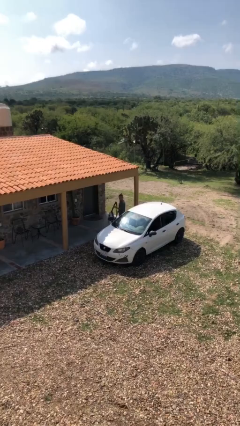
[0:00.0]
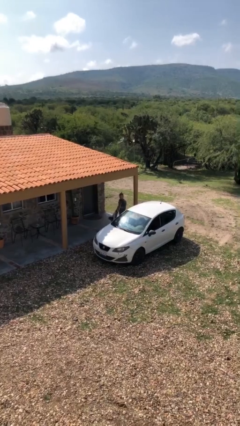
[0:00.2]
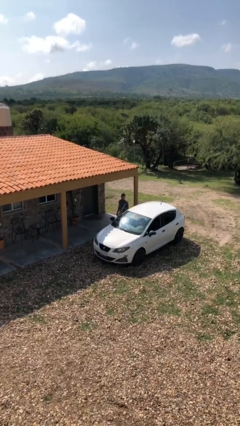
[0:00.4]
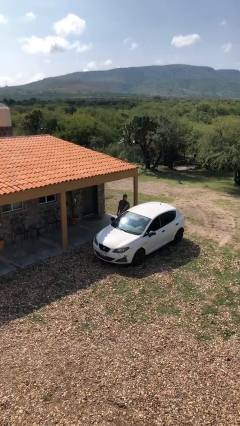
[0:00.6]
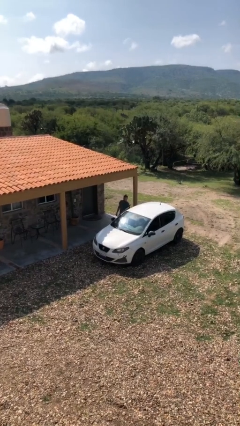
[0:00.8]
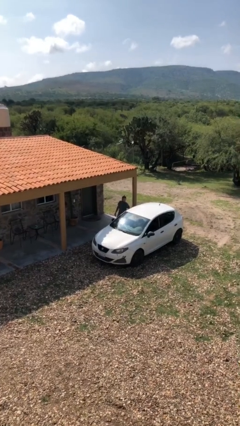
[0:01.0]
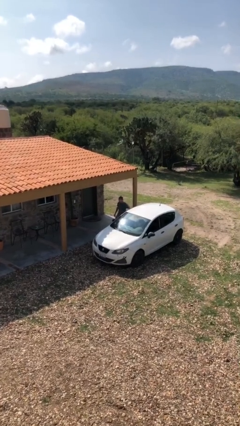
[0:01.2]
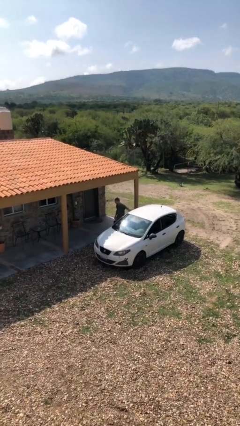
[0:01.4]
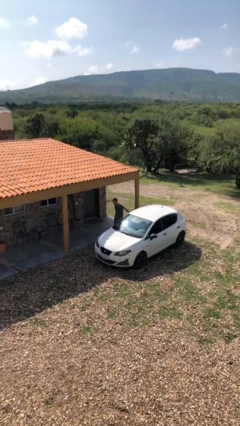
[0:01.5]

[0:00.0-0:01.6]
person closes car door

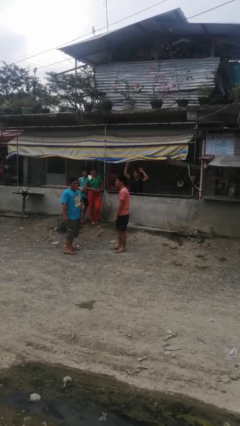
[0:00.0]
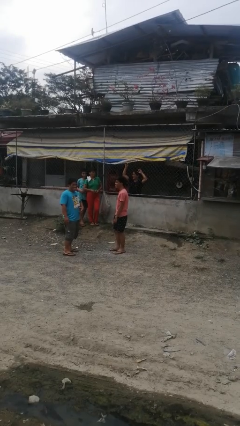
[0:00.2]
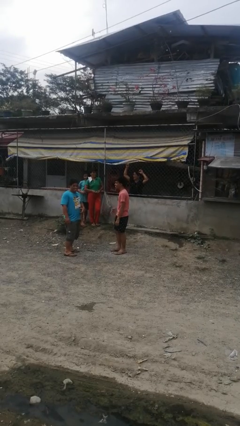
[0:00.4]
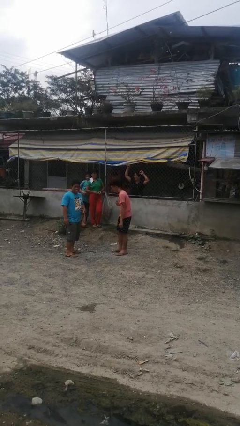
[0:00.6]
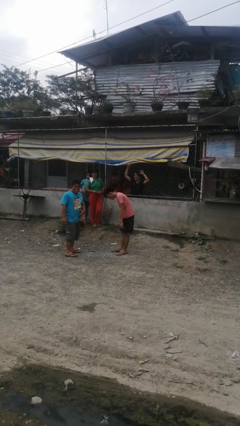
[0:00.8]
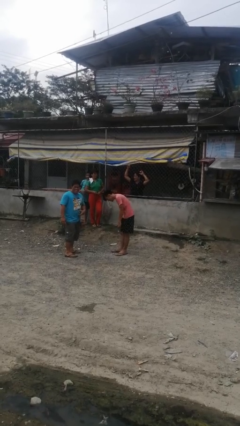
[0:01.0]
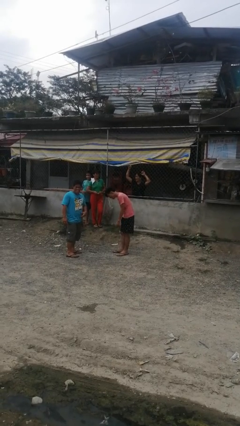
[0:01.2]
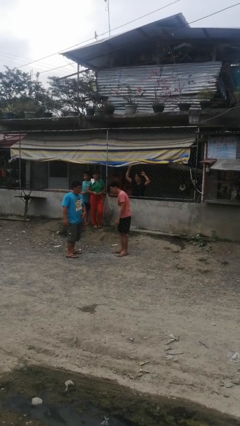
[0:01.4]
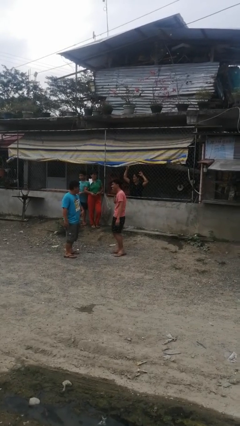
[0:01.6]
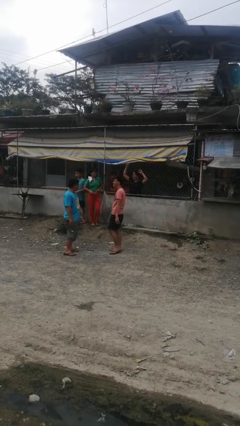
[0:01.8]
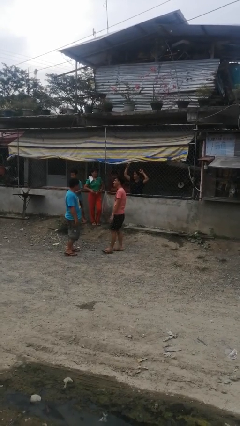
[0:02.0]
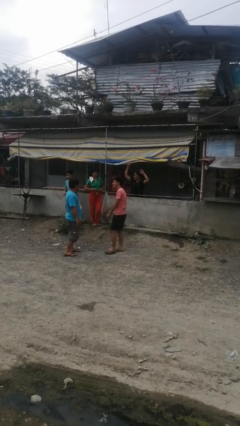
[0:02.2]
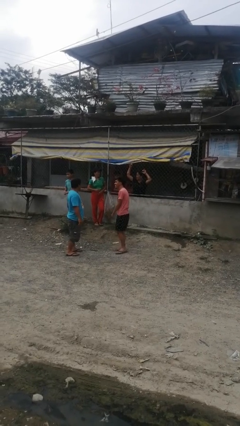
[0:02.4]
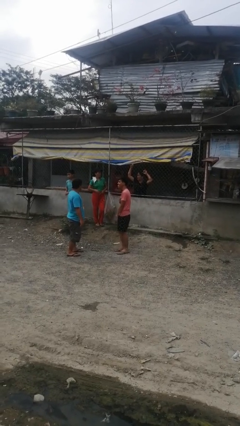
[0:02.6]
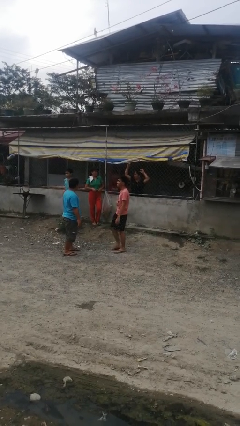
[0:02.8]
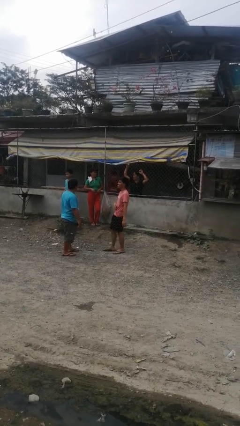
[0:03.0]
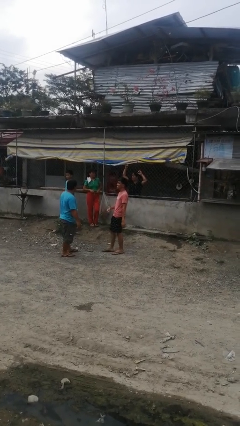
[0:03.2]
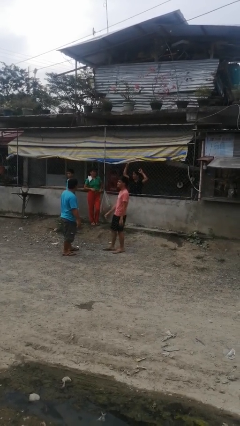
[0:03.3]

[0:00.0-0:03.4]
person laughs with person

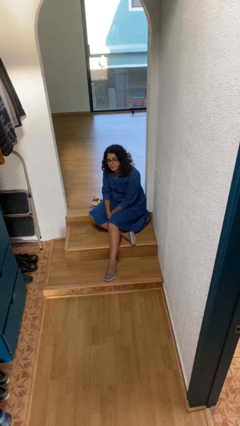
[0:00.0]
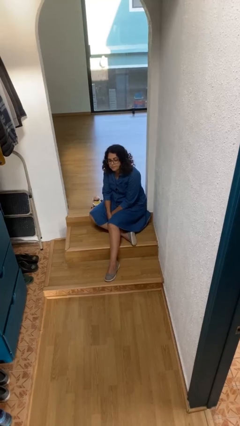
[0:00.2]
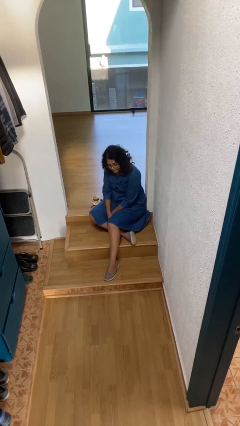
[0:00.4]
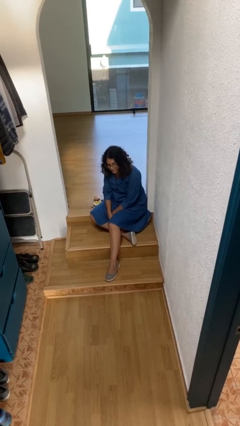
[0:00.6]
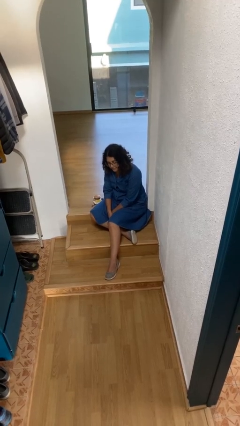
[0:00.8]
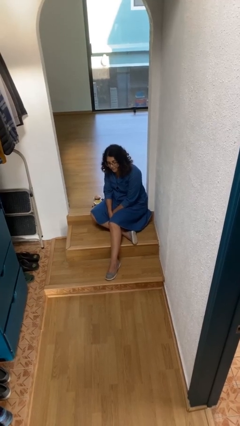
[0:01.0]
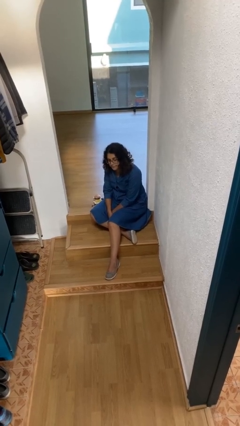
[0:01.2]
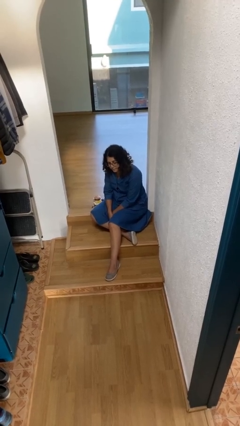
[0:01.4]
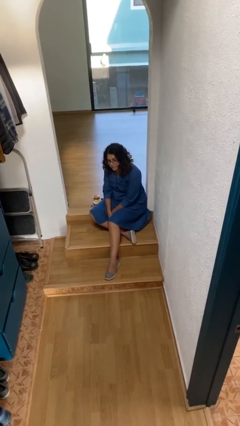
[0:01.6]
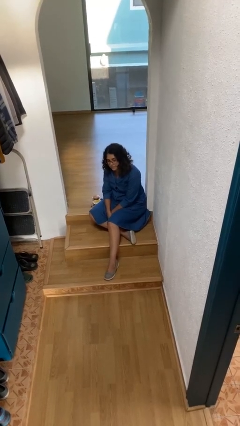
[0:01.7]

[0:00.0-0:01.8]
person nods head

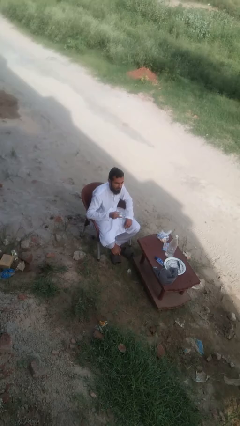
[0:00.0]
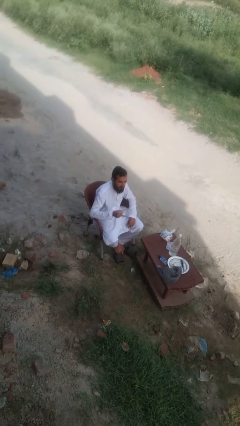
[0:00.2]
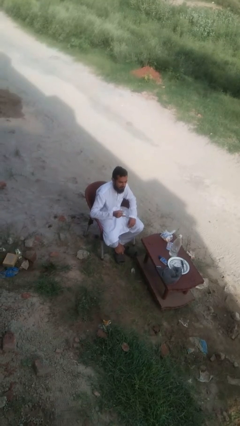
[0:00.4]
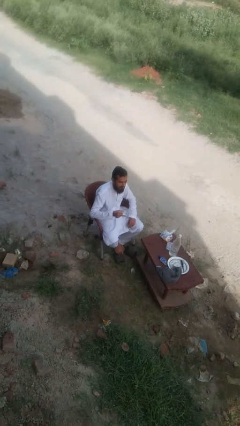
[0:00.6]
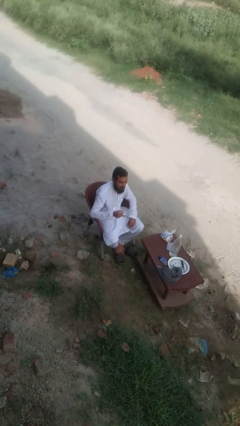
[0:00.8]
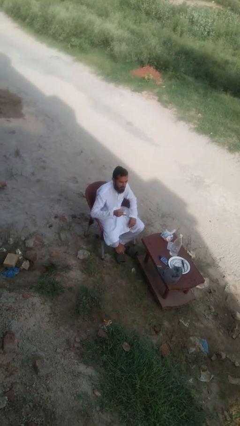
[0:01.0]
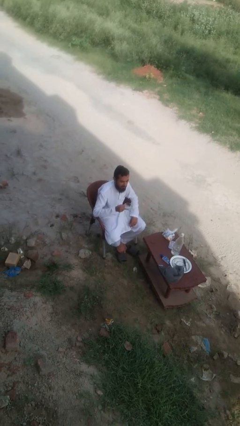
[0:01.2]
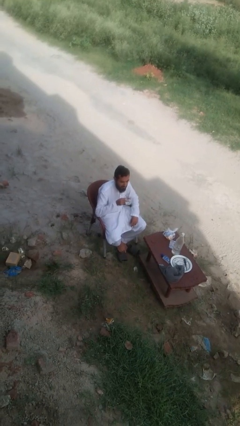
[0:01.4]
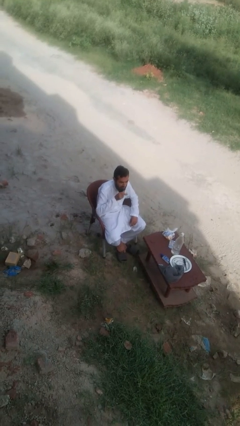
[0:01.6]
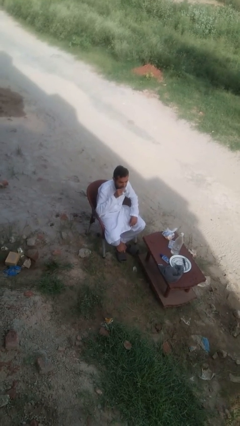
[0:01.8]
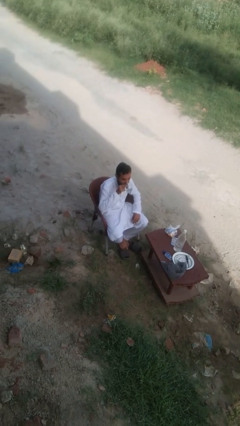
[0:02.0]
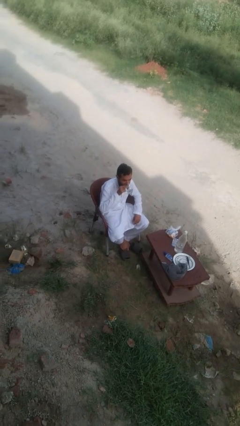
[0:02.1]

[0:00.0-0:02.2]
person drinks from mug

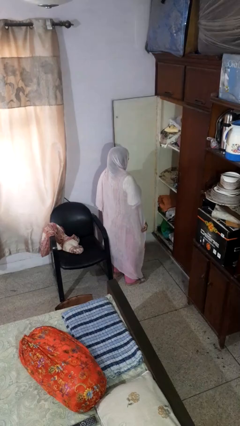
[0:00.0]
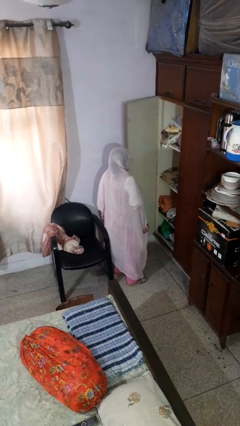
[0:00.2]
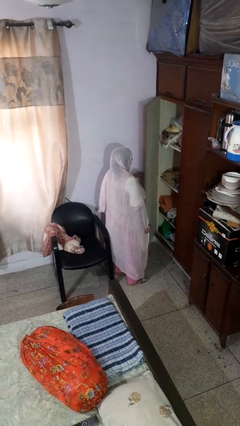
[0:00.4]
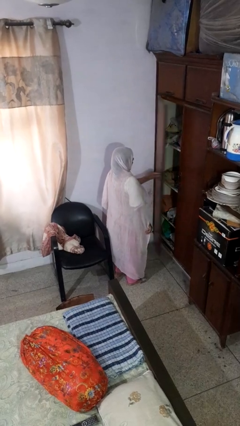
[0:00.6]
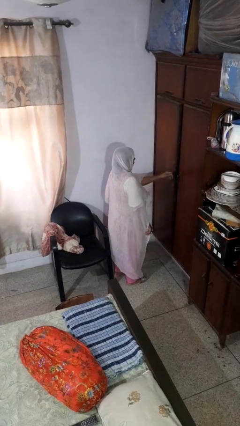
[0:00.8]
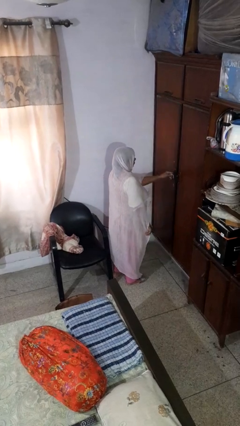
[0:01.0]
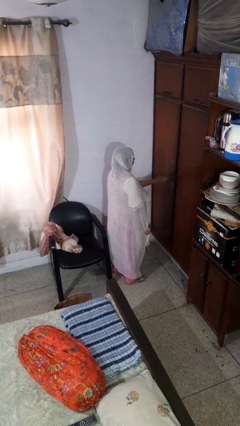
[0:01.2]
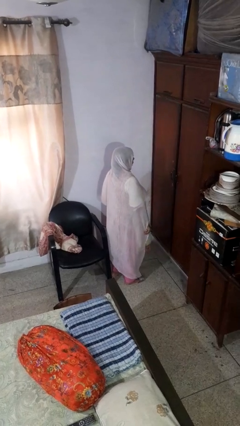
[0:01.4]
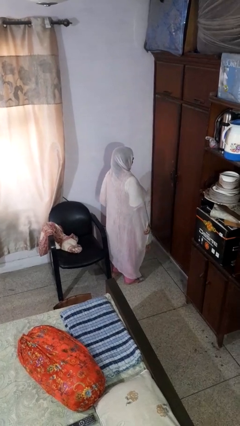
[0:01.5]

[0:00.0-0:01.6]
person closes closet door

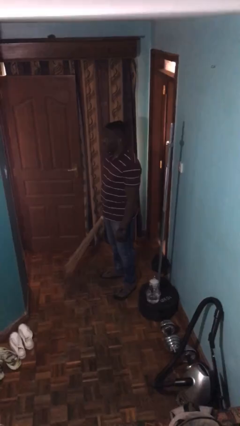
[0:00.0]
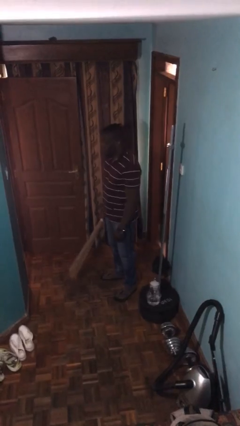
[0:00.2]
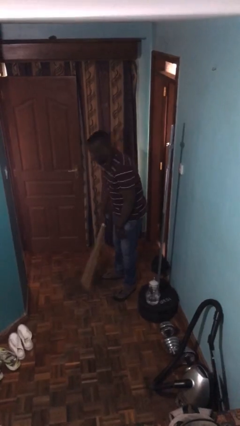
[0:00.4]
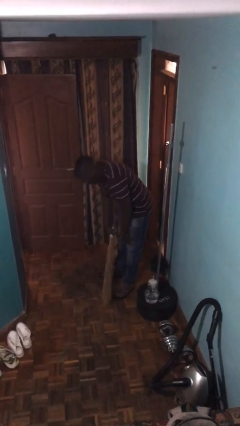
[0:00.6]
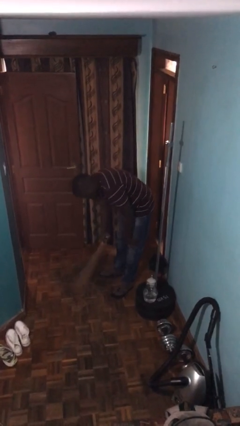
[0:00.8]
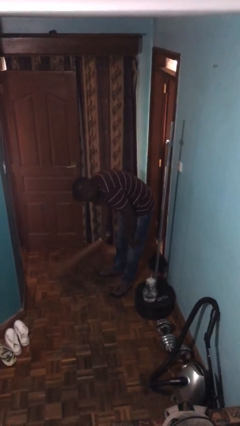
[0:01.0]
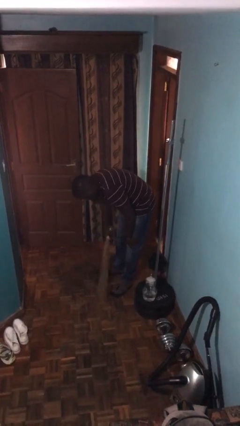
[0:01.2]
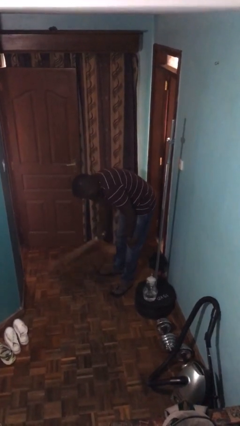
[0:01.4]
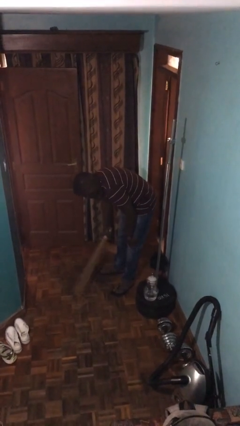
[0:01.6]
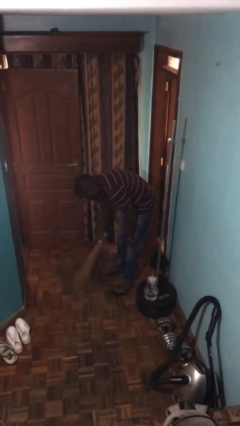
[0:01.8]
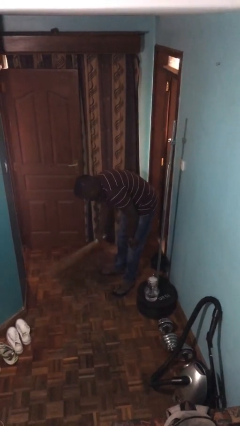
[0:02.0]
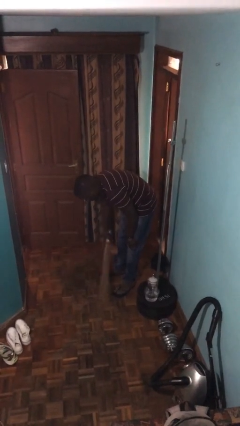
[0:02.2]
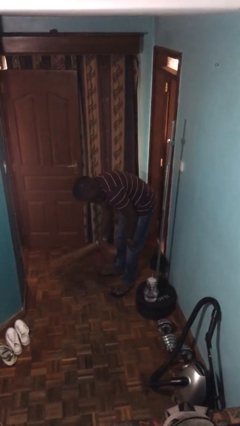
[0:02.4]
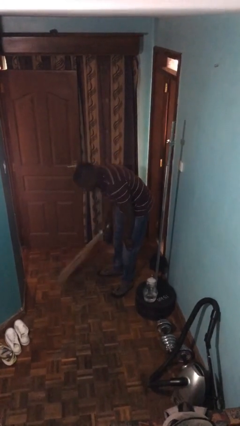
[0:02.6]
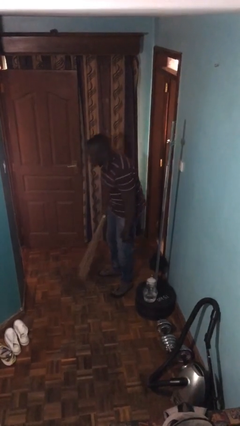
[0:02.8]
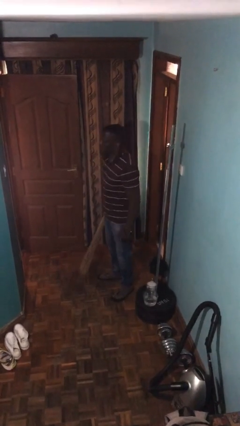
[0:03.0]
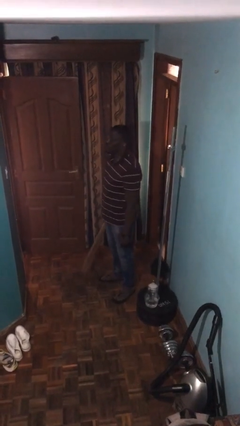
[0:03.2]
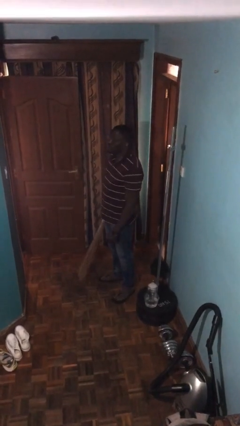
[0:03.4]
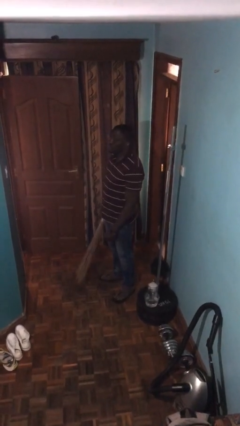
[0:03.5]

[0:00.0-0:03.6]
person sweeps floor

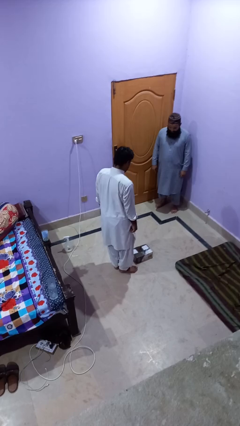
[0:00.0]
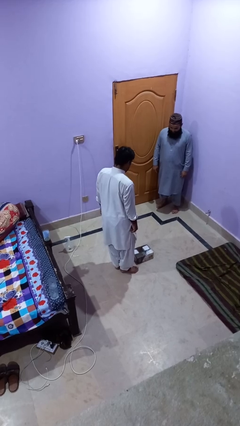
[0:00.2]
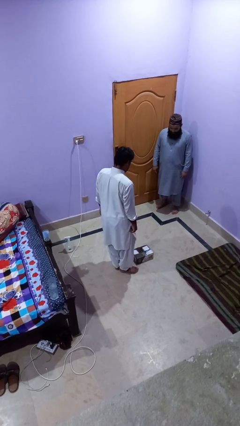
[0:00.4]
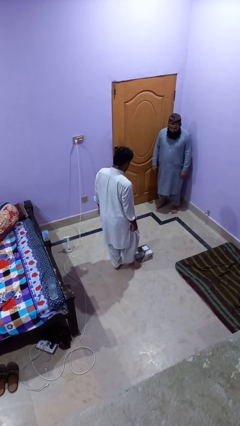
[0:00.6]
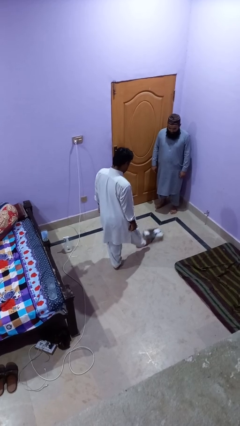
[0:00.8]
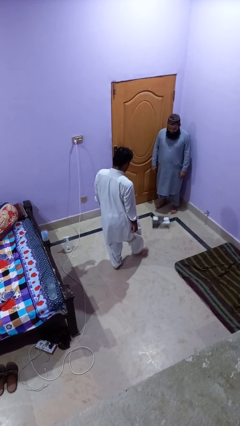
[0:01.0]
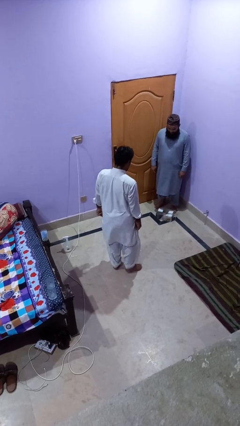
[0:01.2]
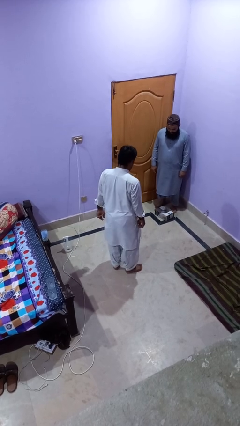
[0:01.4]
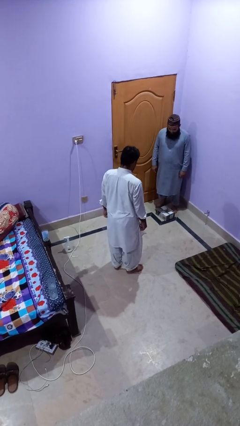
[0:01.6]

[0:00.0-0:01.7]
person kicks object to person

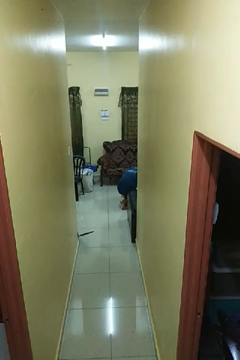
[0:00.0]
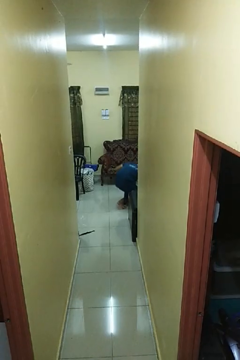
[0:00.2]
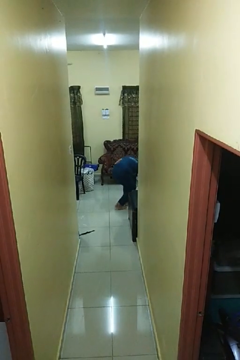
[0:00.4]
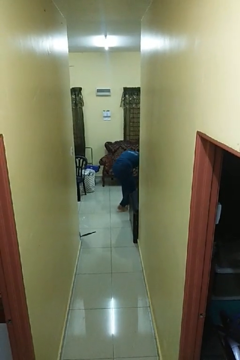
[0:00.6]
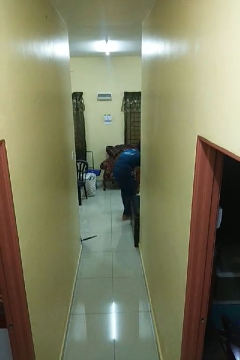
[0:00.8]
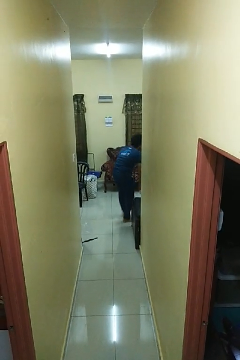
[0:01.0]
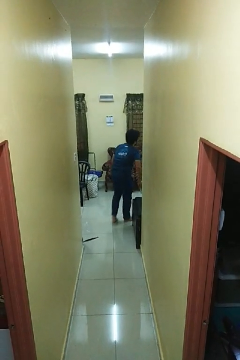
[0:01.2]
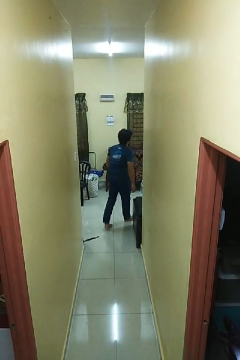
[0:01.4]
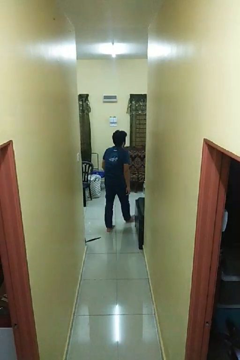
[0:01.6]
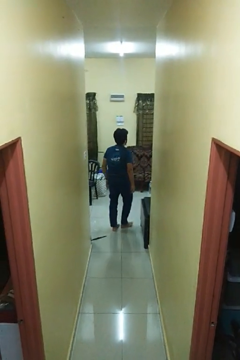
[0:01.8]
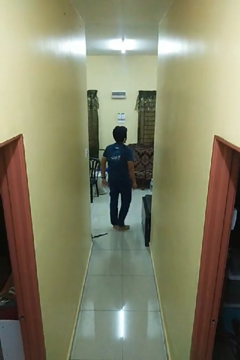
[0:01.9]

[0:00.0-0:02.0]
person stands up from floor
